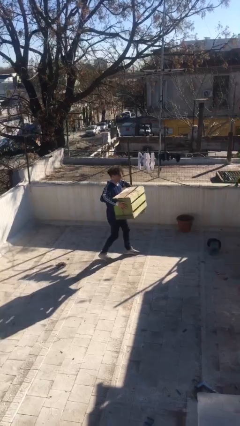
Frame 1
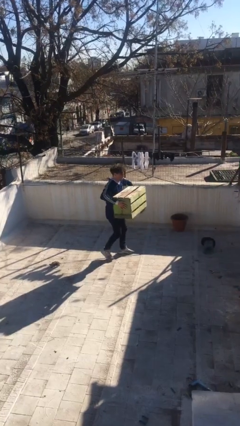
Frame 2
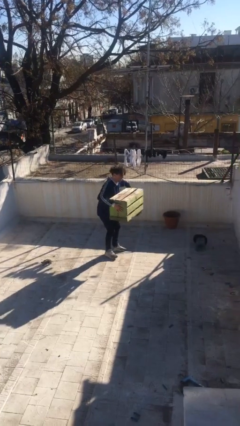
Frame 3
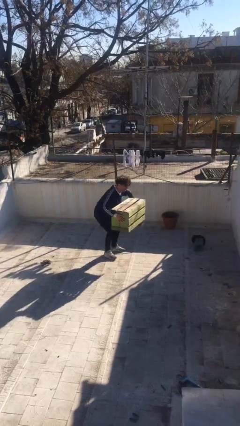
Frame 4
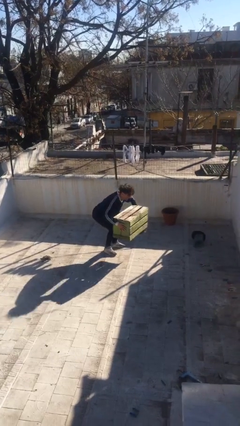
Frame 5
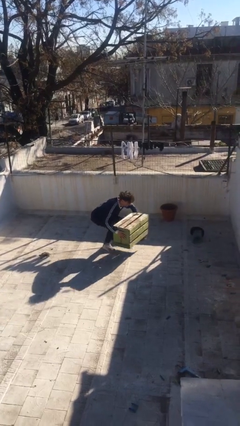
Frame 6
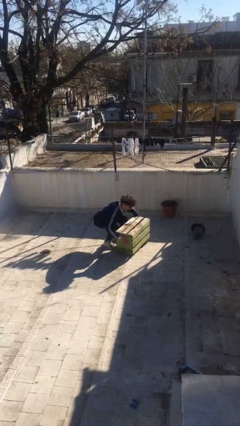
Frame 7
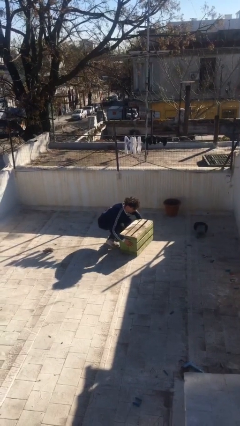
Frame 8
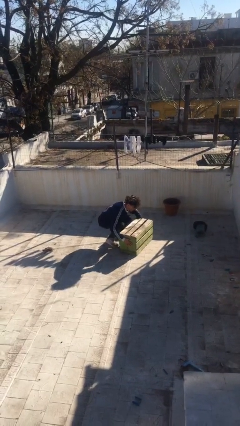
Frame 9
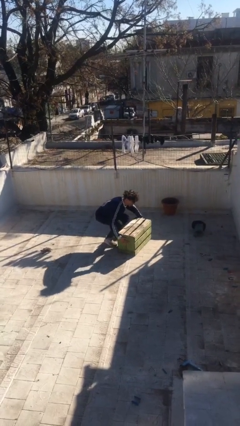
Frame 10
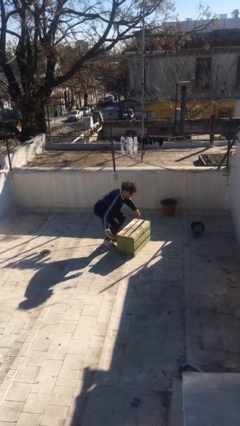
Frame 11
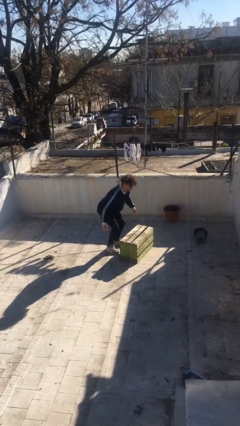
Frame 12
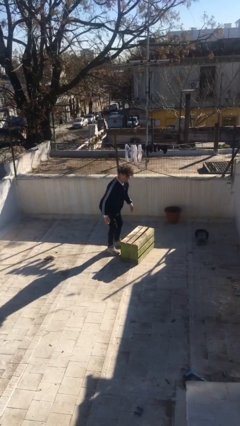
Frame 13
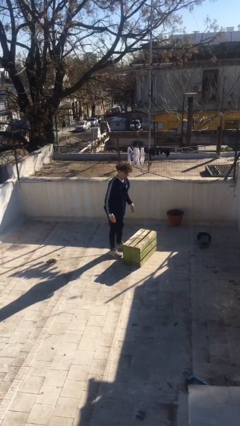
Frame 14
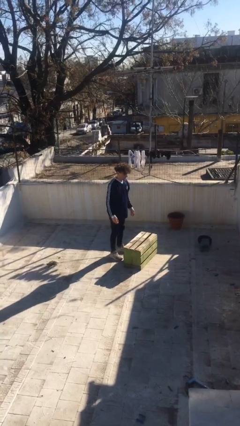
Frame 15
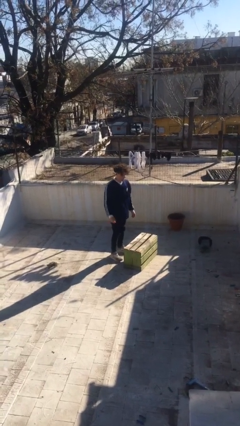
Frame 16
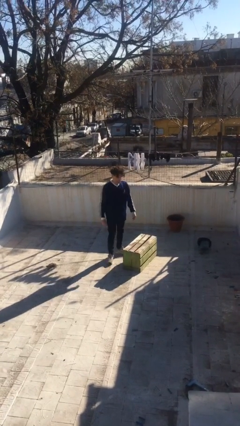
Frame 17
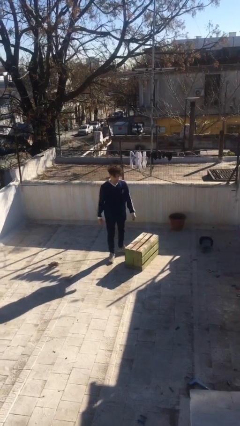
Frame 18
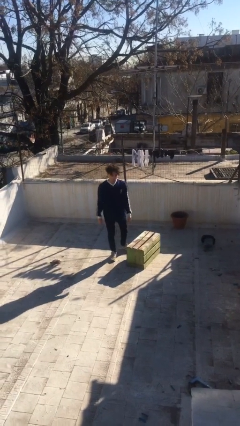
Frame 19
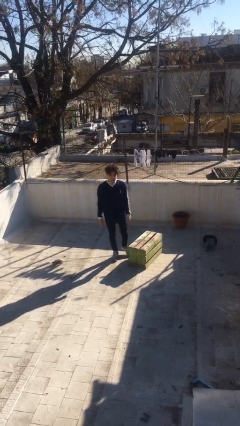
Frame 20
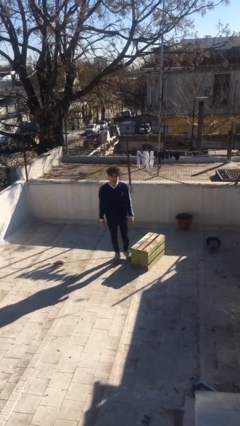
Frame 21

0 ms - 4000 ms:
person puts down object on floor

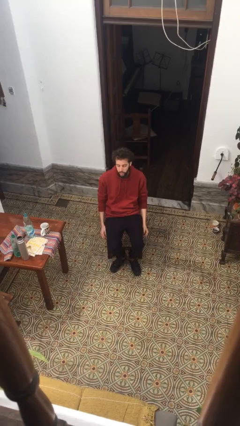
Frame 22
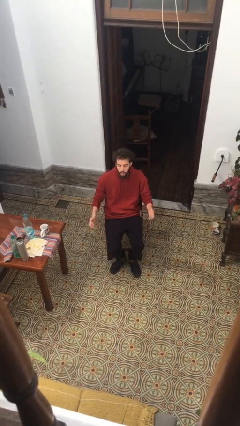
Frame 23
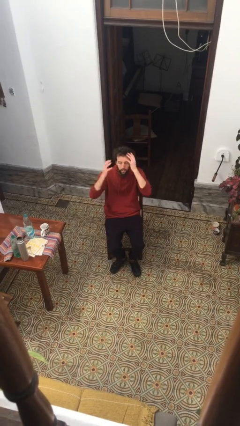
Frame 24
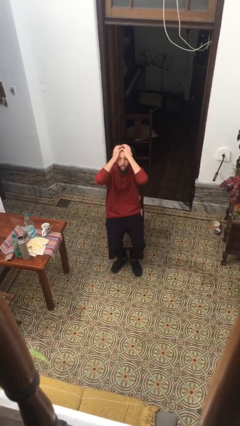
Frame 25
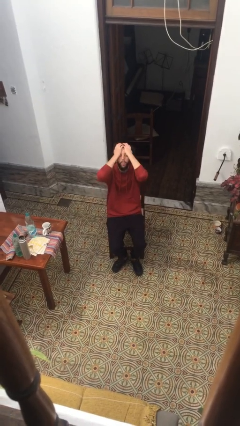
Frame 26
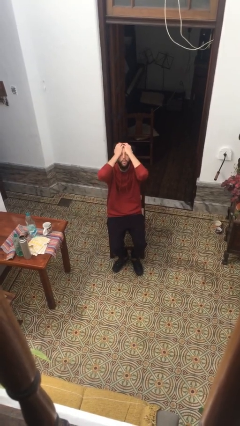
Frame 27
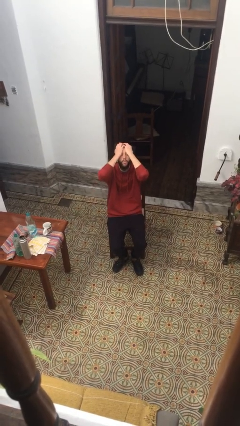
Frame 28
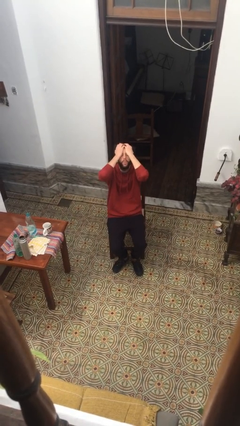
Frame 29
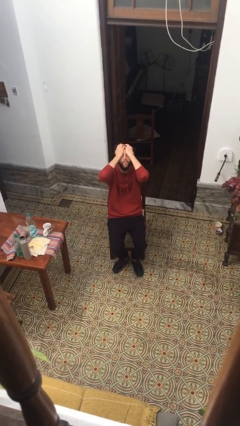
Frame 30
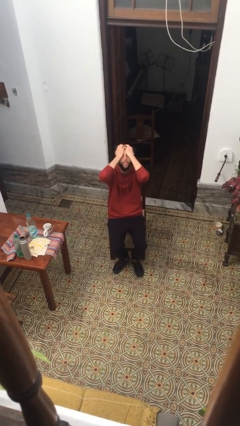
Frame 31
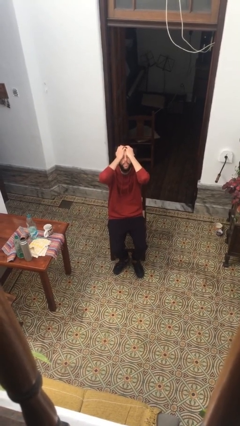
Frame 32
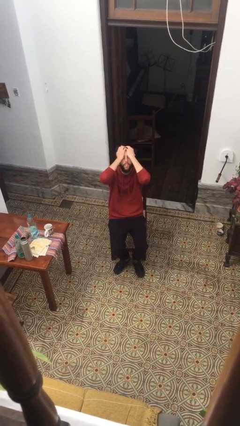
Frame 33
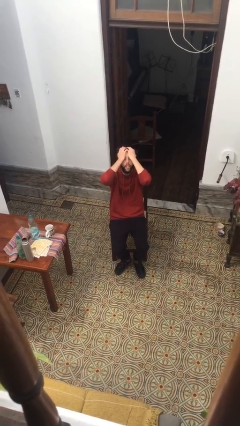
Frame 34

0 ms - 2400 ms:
person covers face with hands

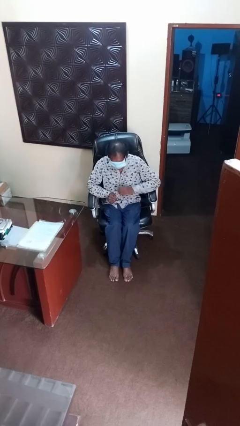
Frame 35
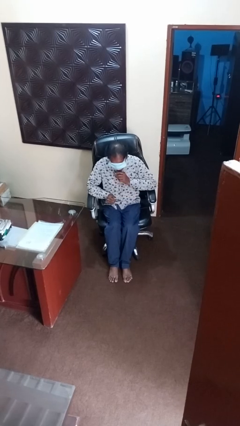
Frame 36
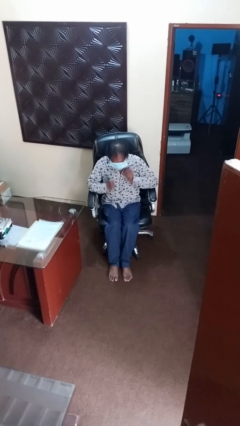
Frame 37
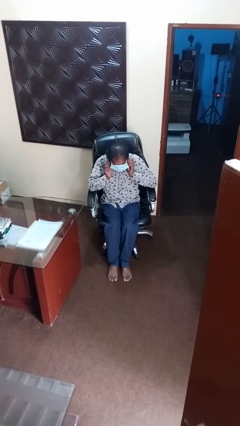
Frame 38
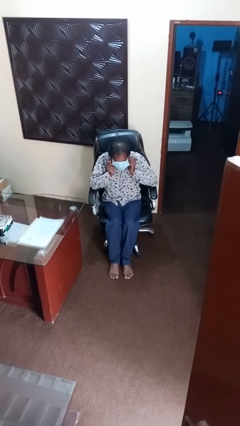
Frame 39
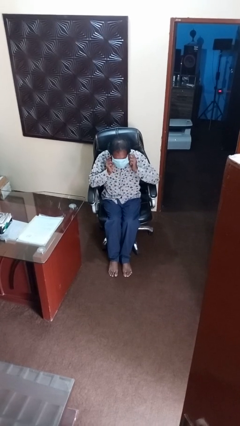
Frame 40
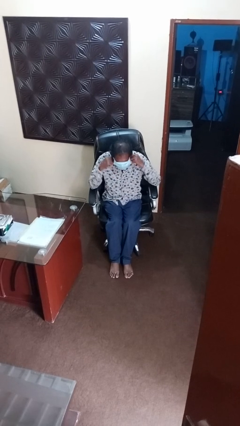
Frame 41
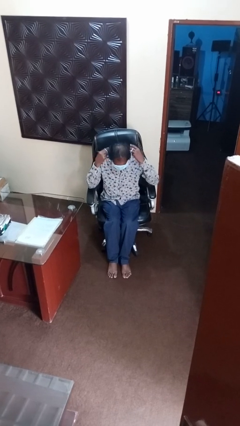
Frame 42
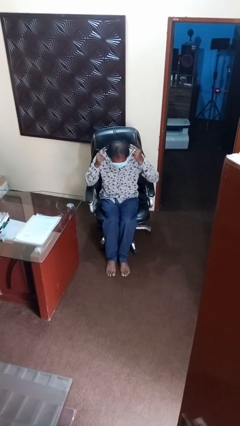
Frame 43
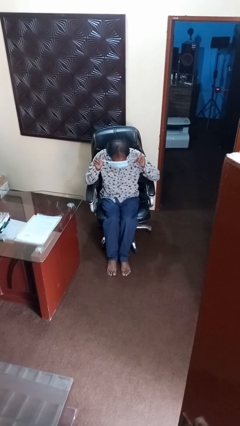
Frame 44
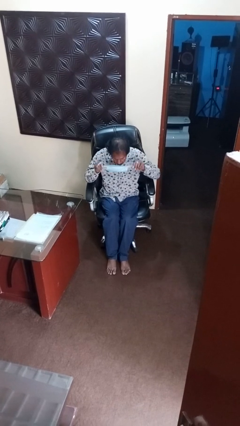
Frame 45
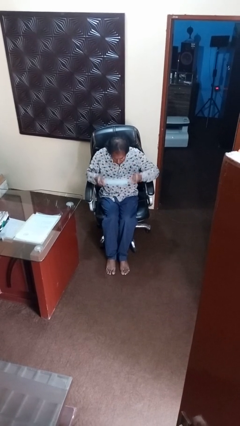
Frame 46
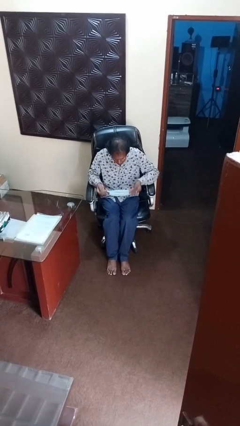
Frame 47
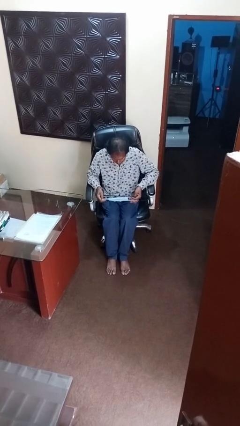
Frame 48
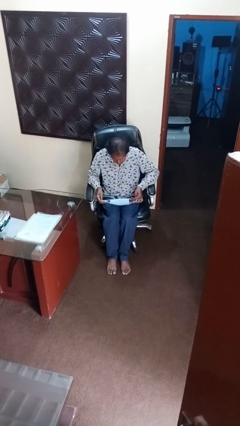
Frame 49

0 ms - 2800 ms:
person takes off facemask

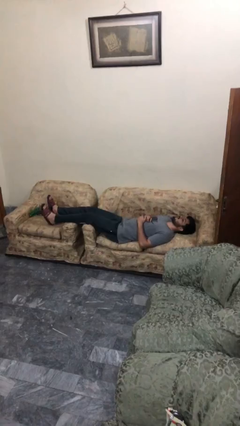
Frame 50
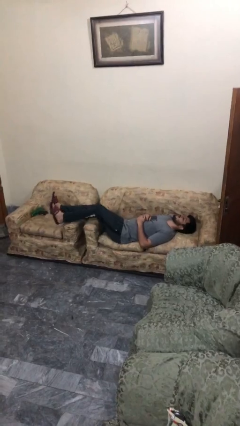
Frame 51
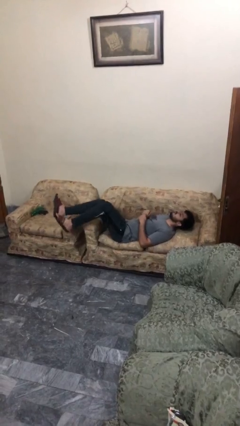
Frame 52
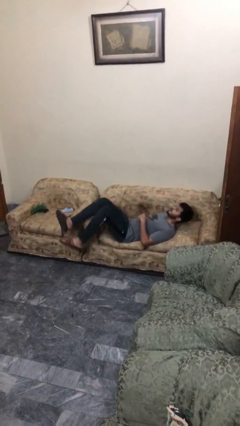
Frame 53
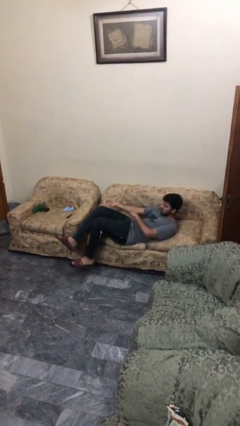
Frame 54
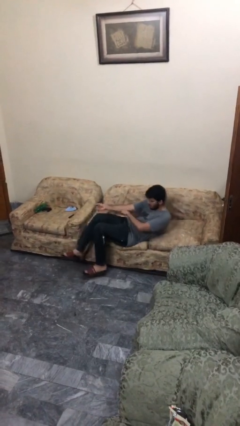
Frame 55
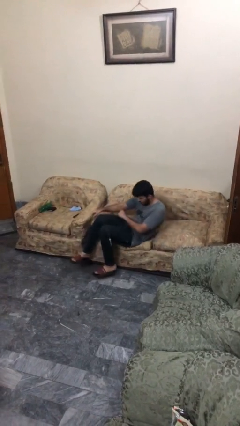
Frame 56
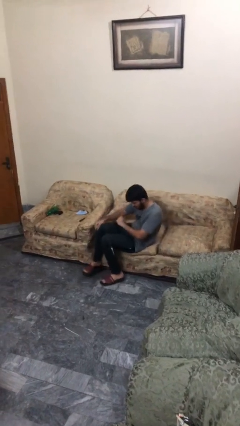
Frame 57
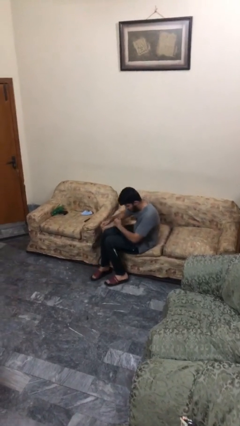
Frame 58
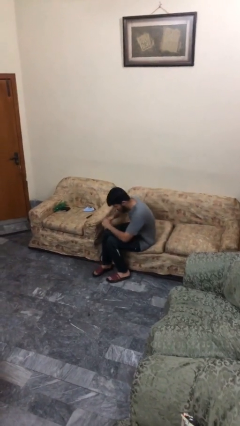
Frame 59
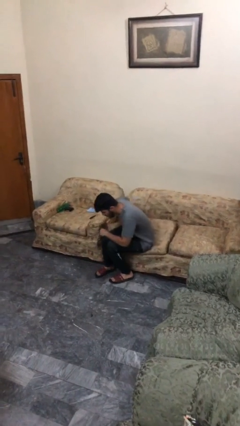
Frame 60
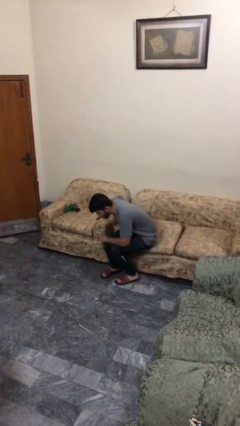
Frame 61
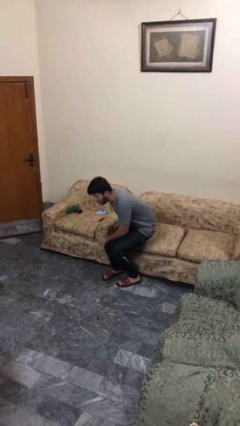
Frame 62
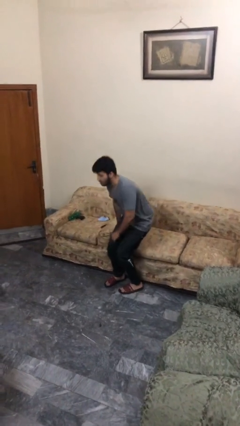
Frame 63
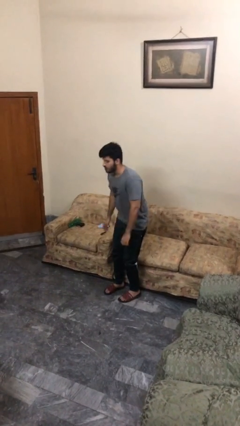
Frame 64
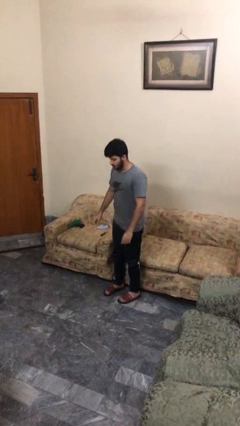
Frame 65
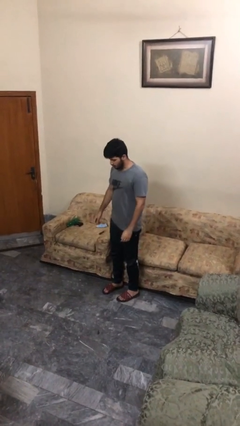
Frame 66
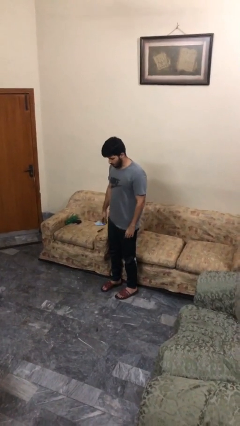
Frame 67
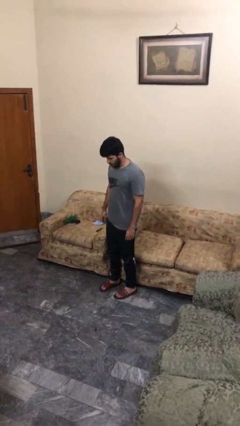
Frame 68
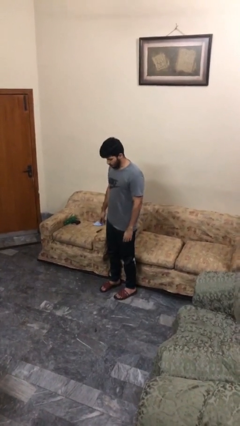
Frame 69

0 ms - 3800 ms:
person stands up

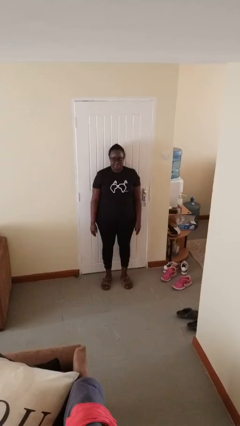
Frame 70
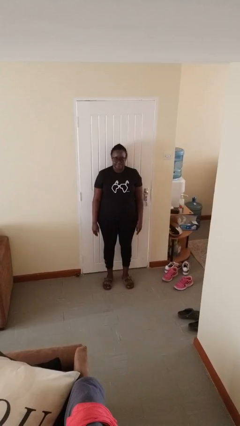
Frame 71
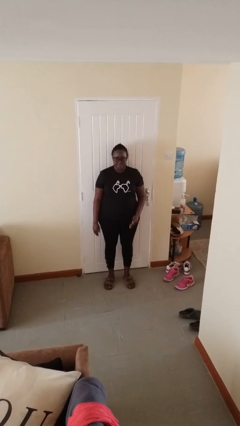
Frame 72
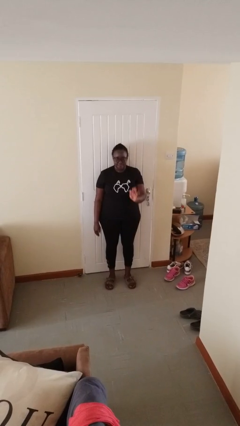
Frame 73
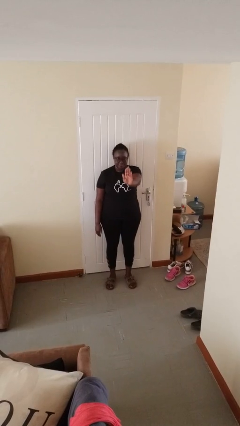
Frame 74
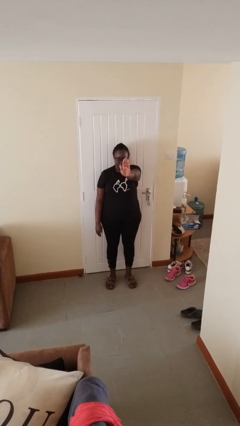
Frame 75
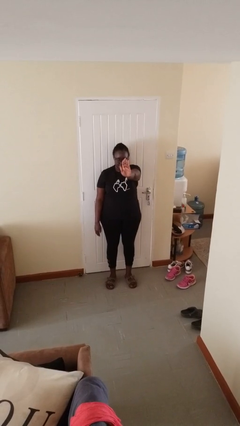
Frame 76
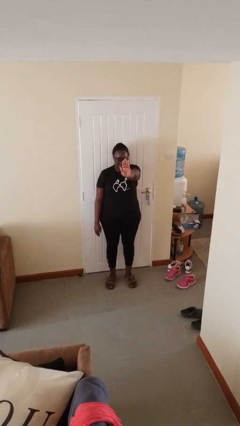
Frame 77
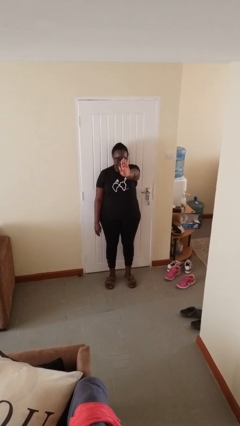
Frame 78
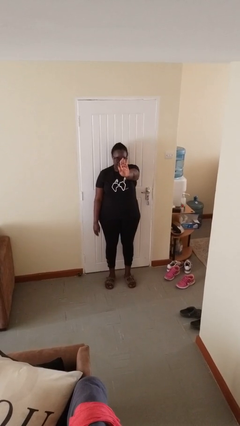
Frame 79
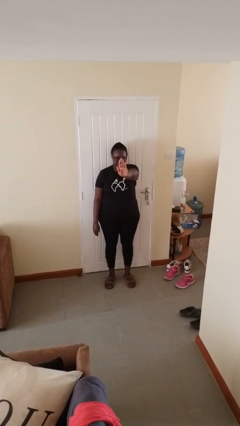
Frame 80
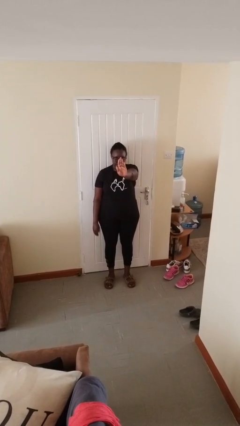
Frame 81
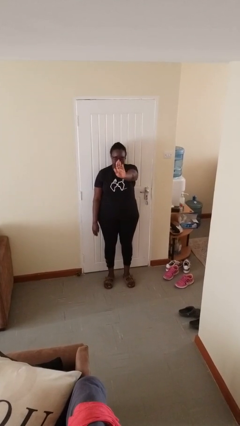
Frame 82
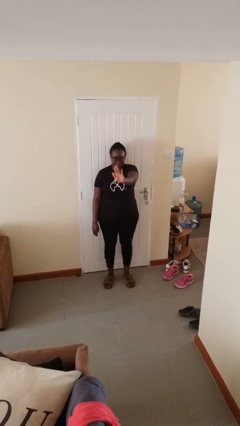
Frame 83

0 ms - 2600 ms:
person gestures stop

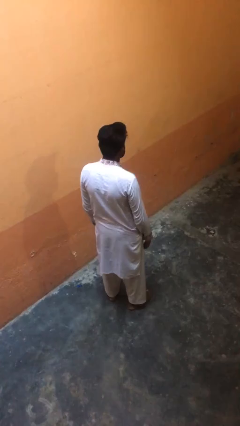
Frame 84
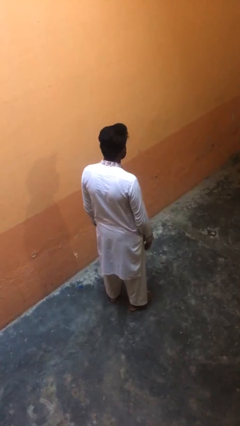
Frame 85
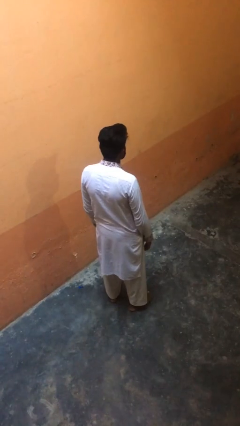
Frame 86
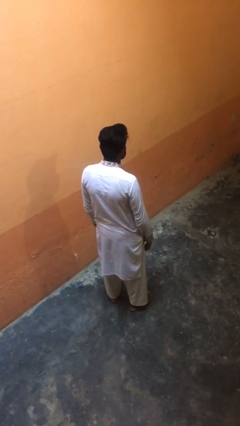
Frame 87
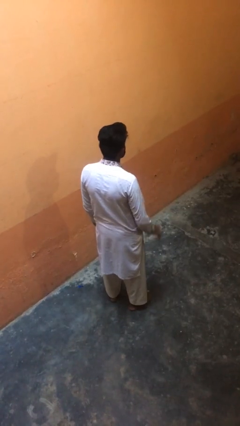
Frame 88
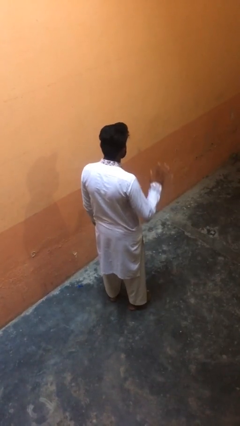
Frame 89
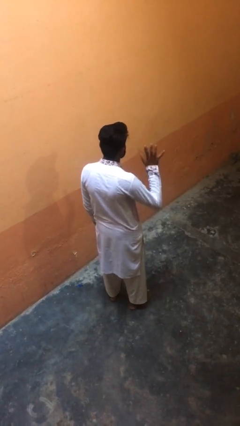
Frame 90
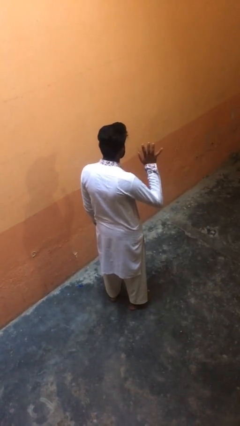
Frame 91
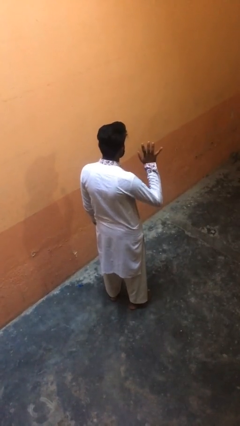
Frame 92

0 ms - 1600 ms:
person gestures number five
